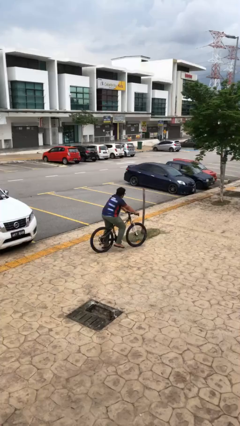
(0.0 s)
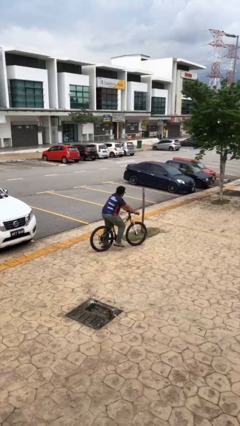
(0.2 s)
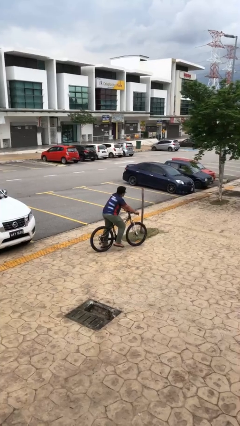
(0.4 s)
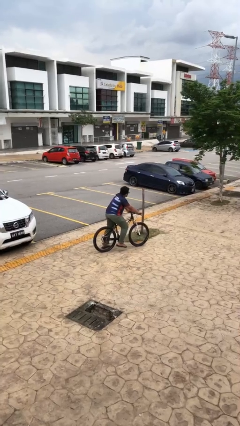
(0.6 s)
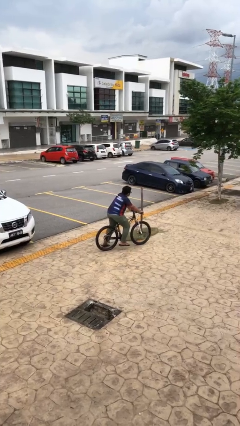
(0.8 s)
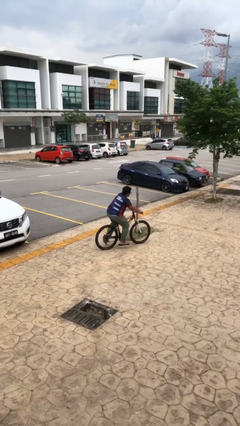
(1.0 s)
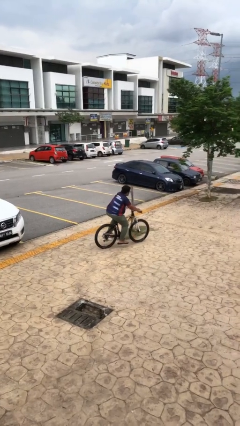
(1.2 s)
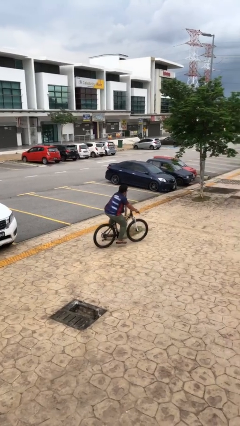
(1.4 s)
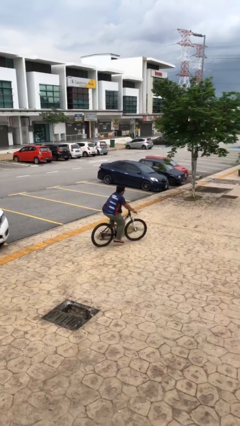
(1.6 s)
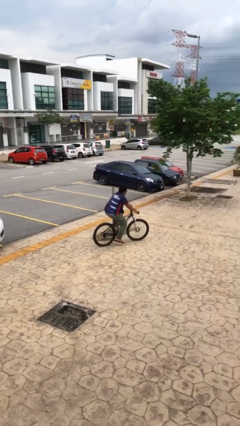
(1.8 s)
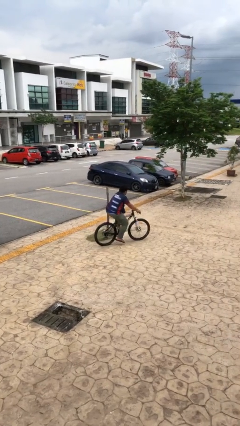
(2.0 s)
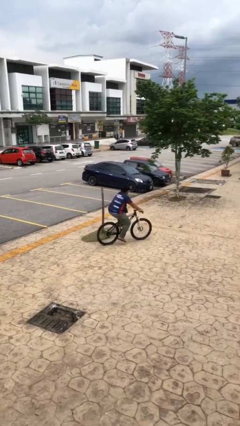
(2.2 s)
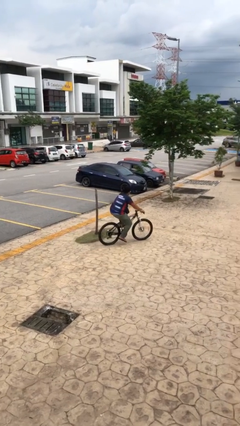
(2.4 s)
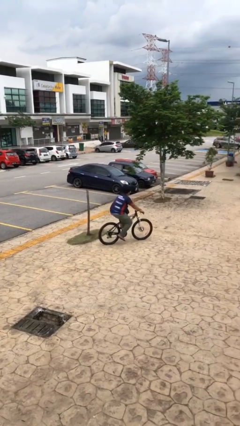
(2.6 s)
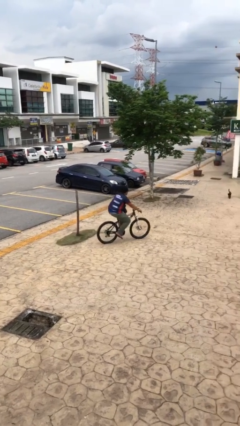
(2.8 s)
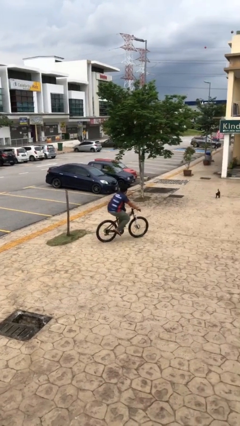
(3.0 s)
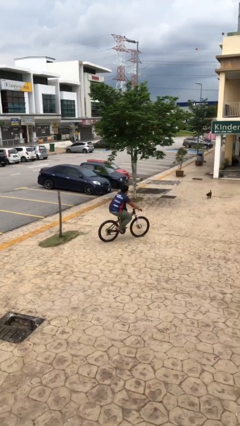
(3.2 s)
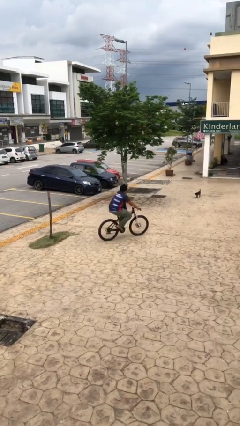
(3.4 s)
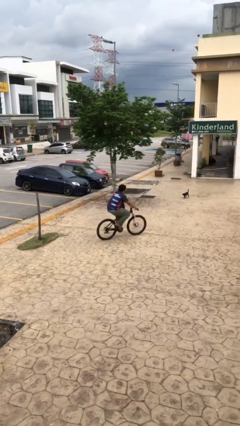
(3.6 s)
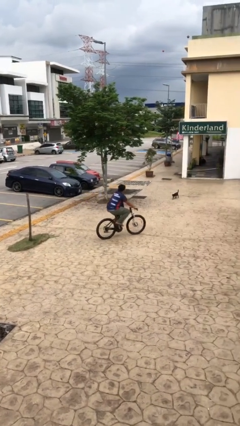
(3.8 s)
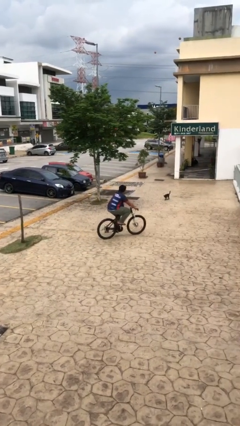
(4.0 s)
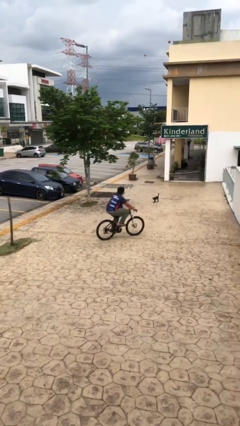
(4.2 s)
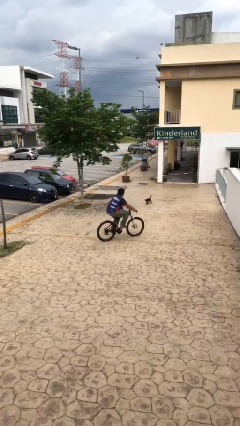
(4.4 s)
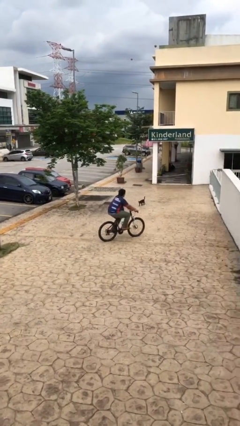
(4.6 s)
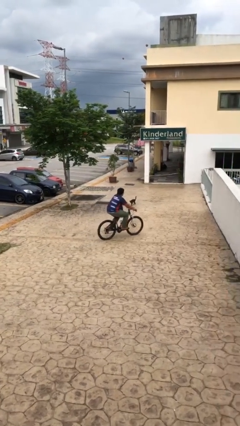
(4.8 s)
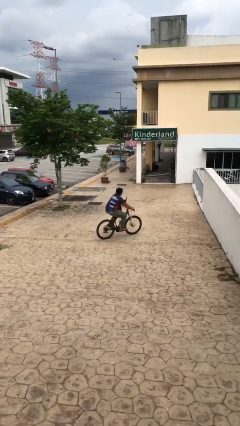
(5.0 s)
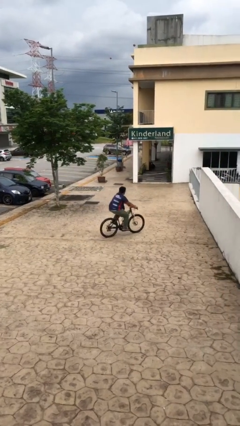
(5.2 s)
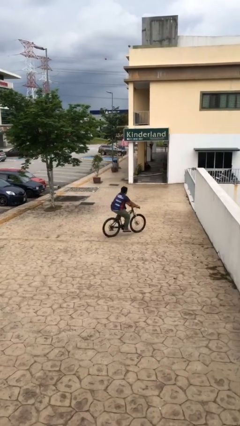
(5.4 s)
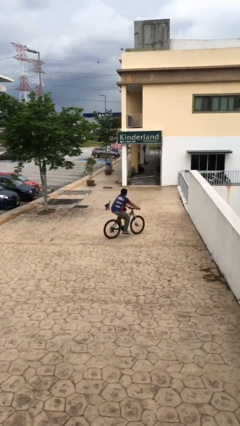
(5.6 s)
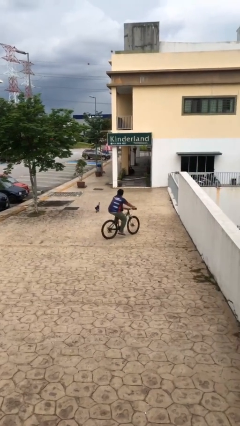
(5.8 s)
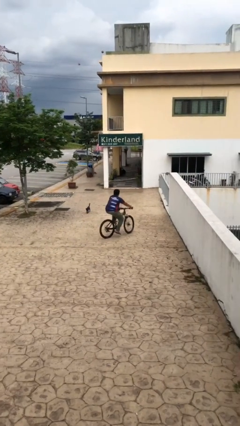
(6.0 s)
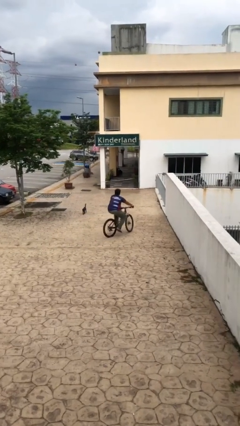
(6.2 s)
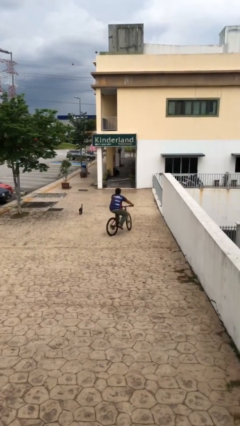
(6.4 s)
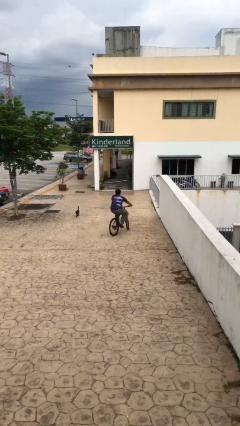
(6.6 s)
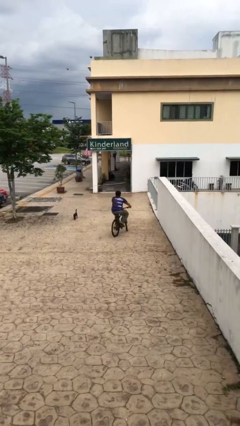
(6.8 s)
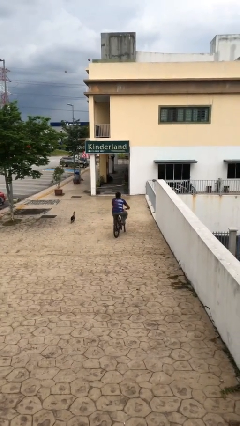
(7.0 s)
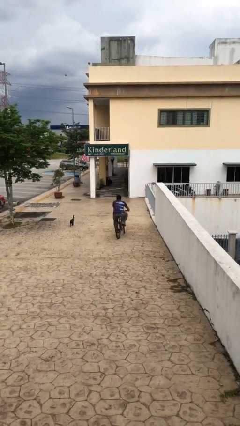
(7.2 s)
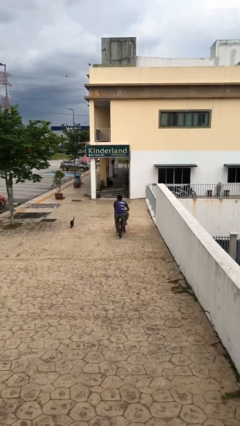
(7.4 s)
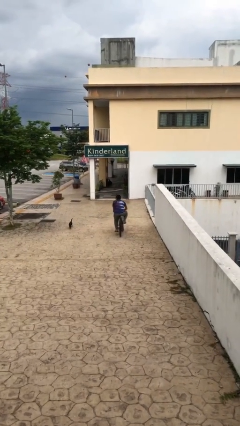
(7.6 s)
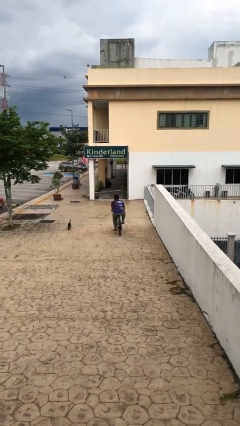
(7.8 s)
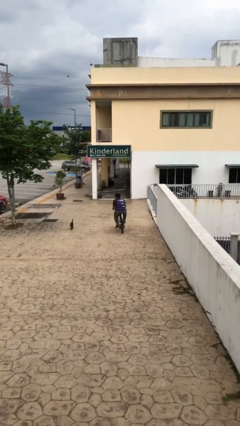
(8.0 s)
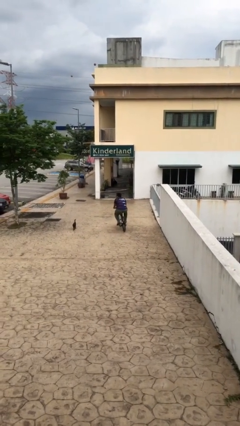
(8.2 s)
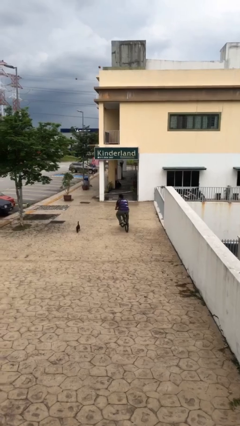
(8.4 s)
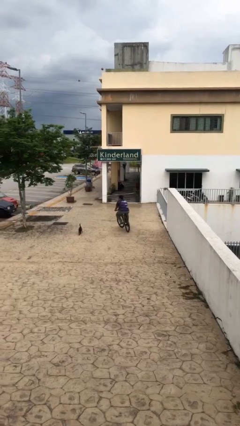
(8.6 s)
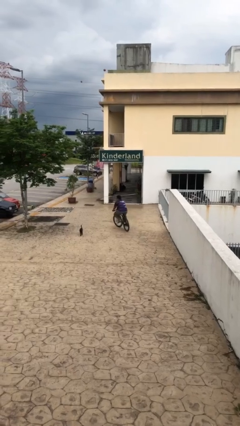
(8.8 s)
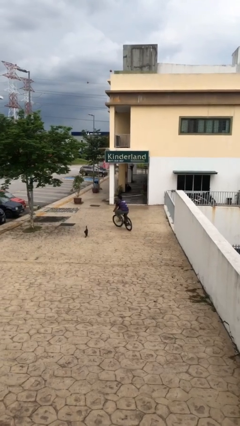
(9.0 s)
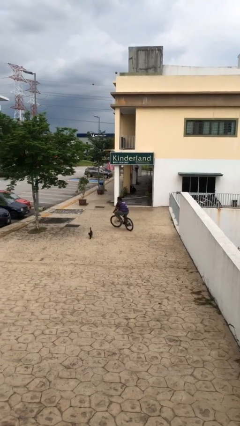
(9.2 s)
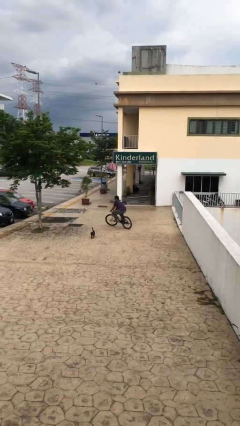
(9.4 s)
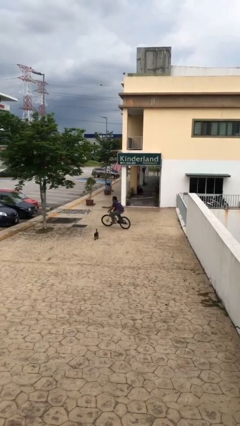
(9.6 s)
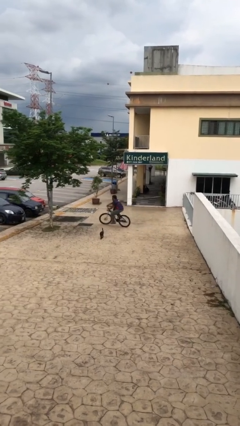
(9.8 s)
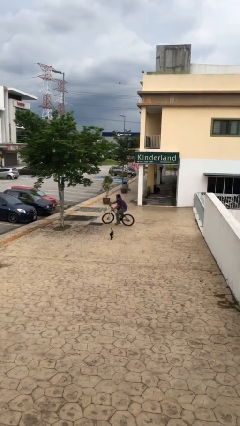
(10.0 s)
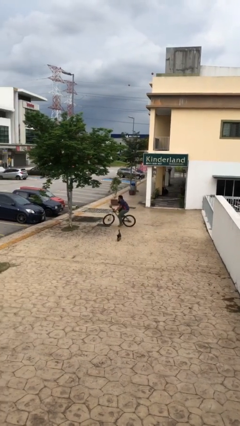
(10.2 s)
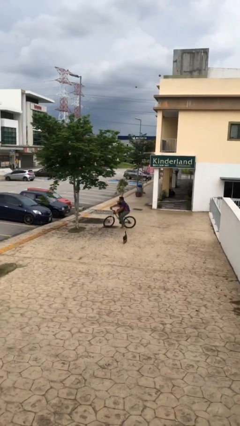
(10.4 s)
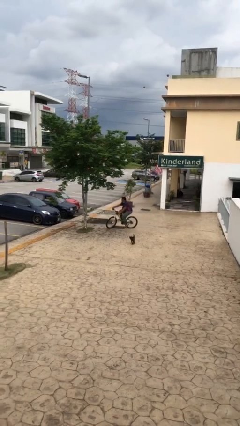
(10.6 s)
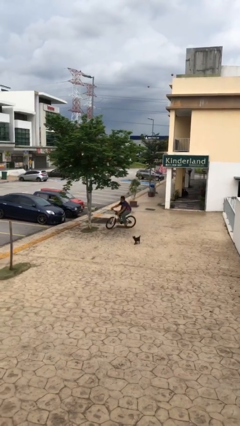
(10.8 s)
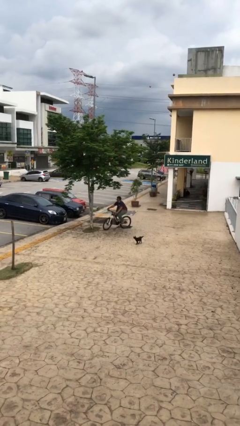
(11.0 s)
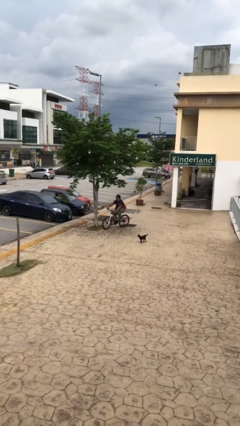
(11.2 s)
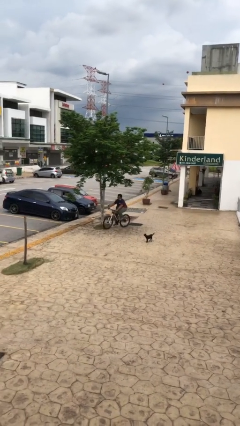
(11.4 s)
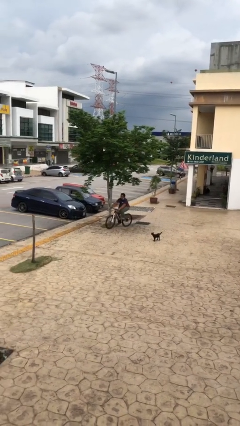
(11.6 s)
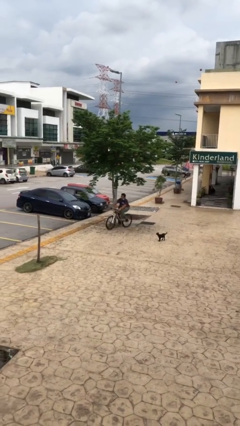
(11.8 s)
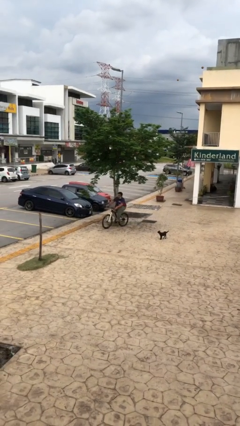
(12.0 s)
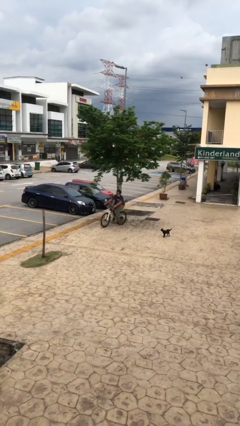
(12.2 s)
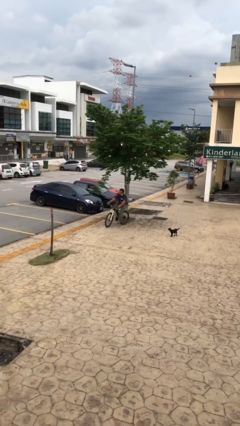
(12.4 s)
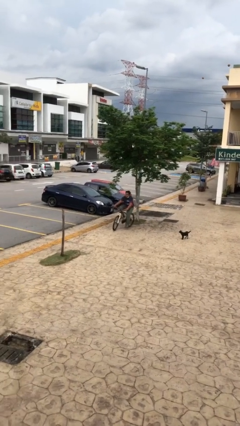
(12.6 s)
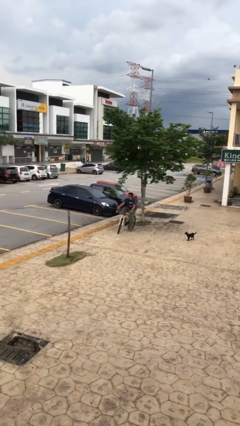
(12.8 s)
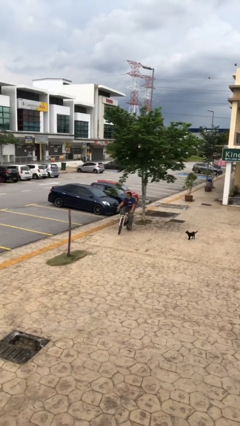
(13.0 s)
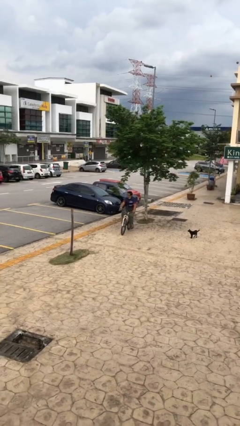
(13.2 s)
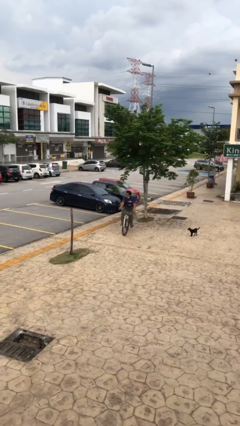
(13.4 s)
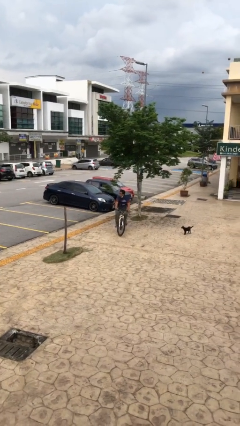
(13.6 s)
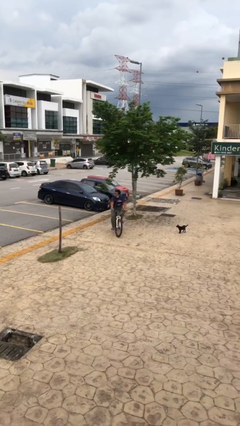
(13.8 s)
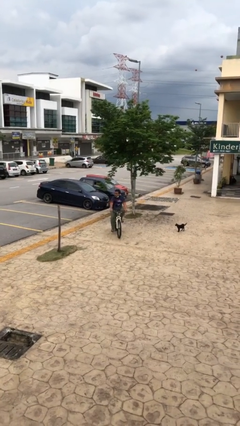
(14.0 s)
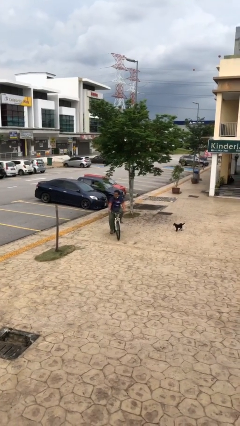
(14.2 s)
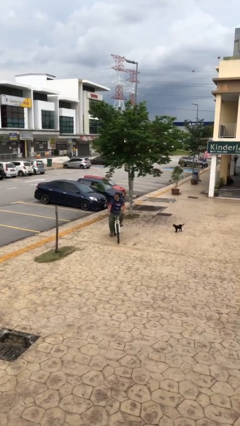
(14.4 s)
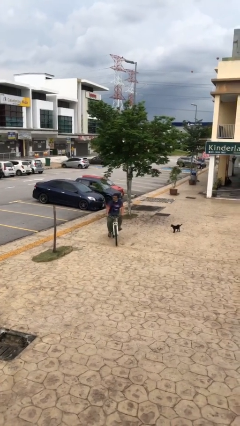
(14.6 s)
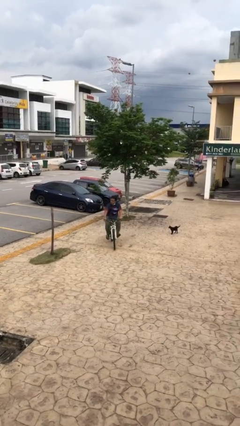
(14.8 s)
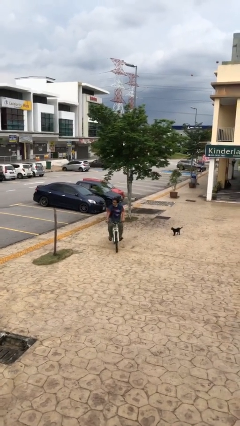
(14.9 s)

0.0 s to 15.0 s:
person rides bicycle

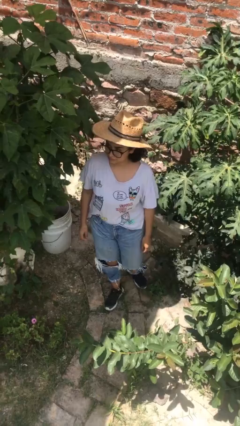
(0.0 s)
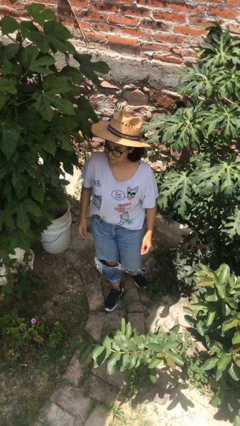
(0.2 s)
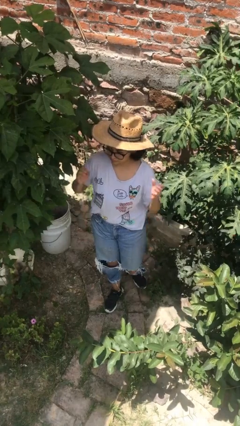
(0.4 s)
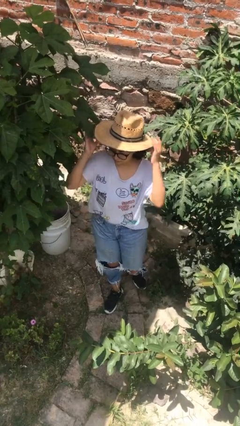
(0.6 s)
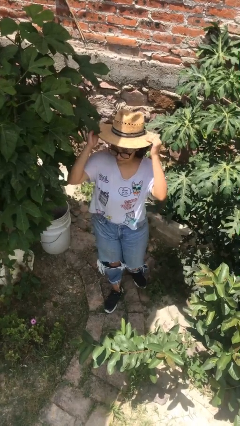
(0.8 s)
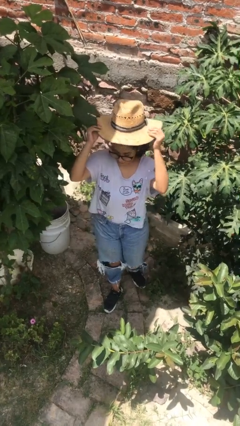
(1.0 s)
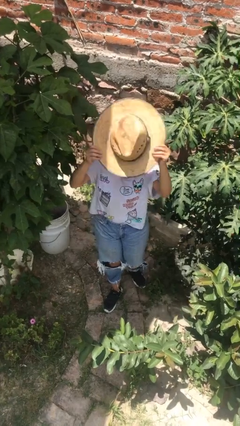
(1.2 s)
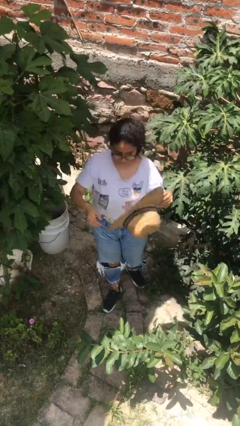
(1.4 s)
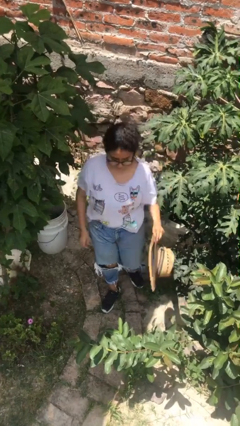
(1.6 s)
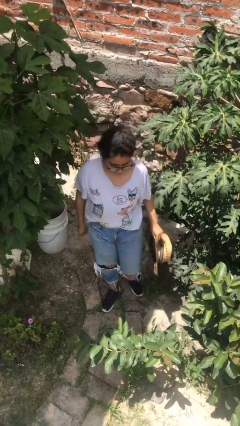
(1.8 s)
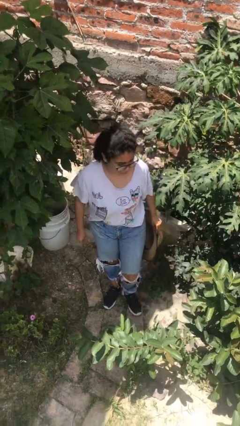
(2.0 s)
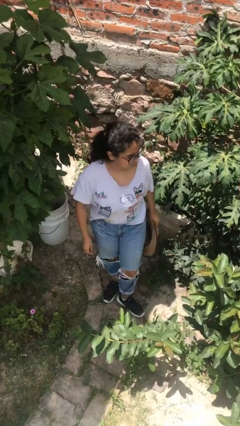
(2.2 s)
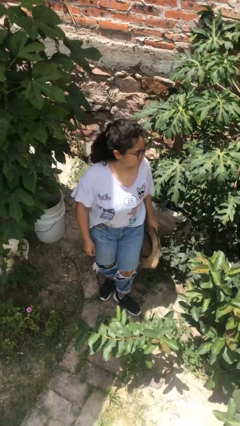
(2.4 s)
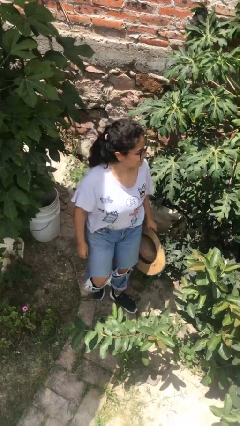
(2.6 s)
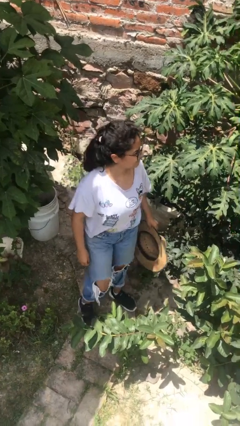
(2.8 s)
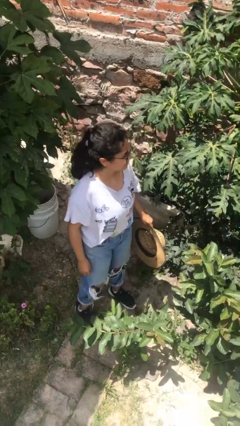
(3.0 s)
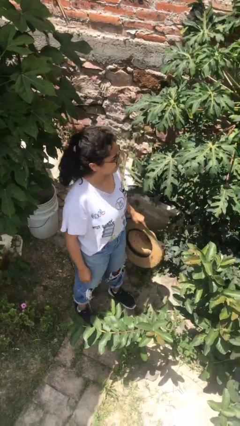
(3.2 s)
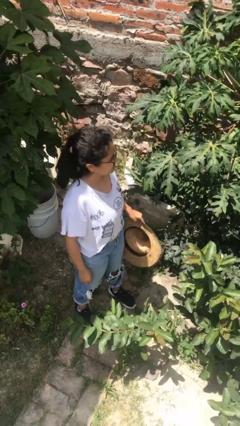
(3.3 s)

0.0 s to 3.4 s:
person takes off hat
